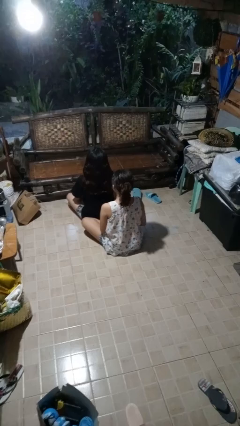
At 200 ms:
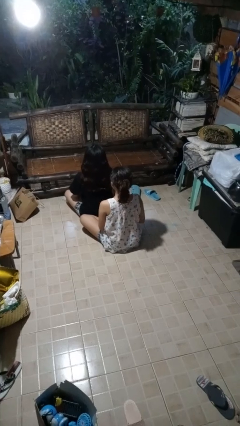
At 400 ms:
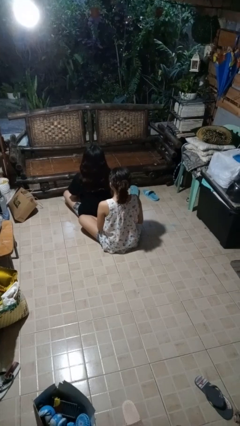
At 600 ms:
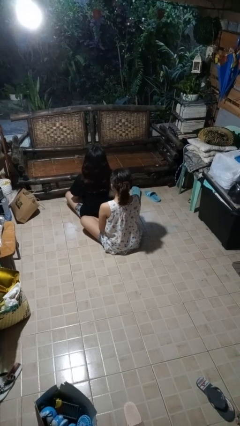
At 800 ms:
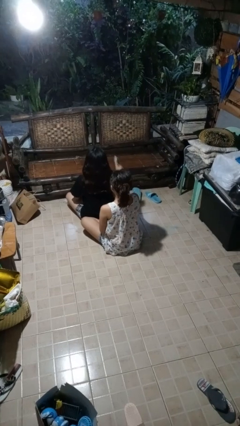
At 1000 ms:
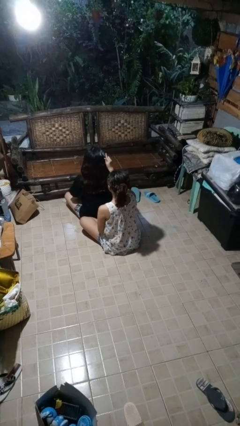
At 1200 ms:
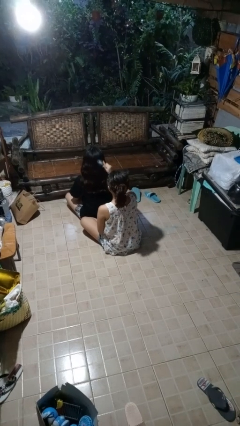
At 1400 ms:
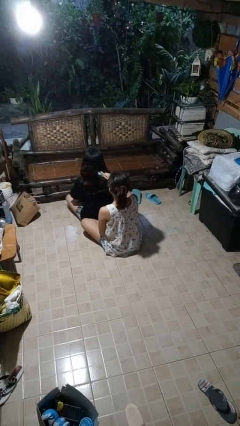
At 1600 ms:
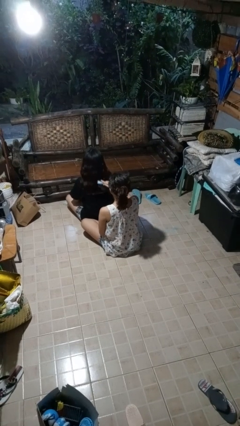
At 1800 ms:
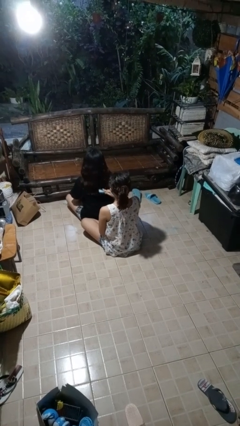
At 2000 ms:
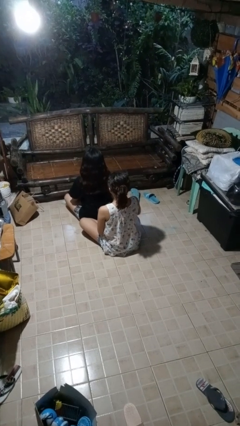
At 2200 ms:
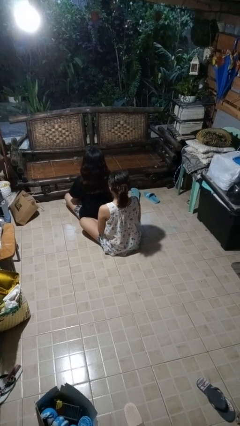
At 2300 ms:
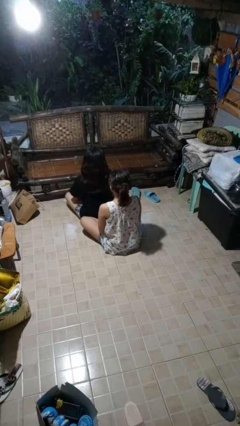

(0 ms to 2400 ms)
person brushes hair of person

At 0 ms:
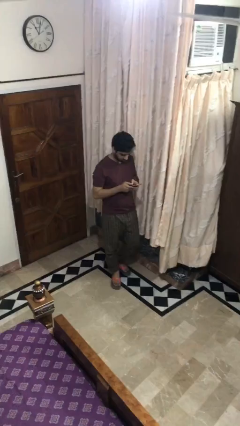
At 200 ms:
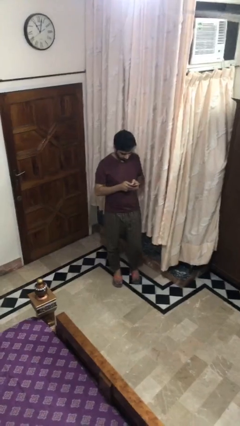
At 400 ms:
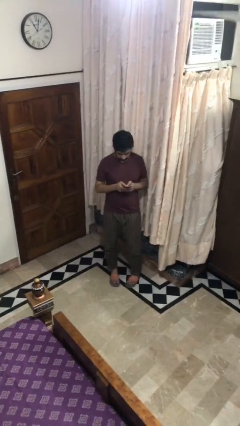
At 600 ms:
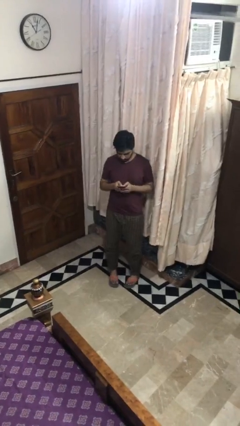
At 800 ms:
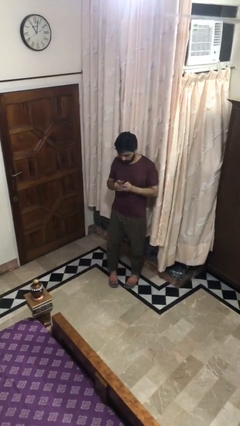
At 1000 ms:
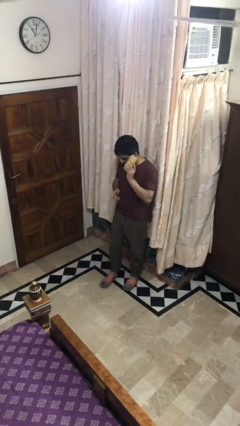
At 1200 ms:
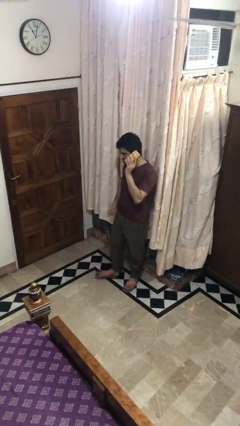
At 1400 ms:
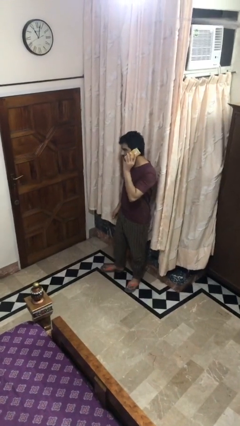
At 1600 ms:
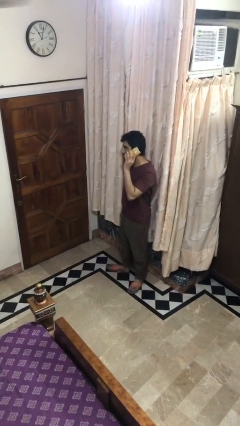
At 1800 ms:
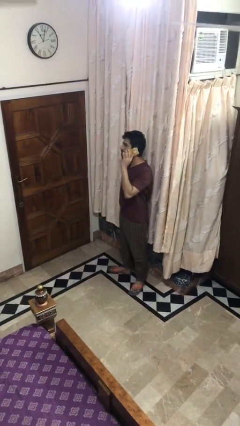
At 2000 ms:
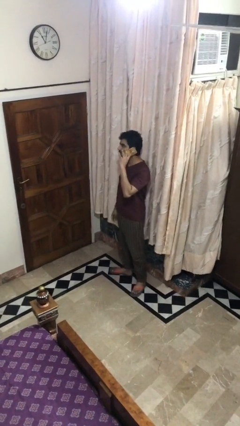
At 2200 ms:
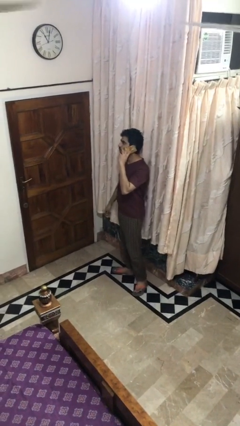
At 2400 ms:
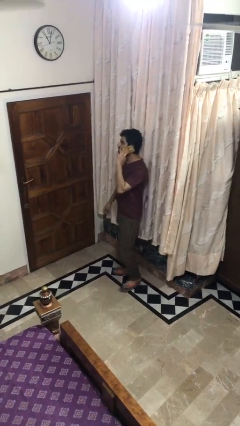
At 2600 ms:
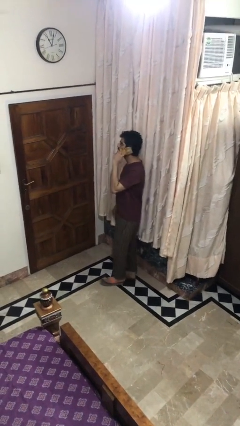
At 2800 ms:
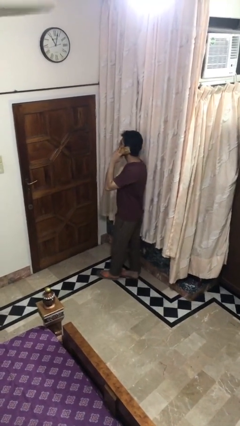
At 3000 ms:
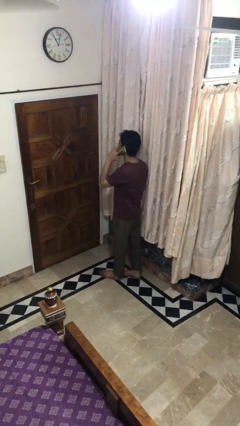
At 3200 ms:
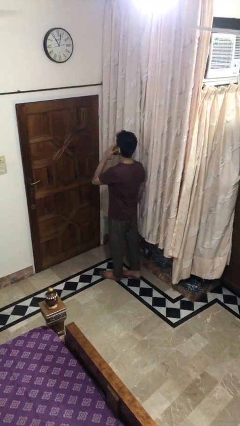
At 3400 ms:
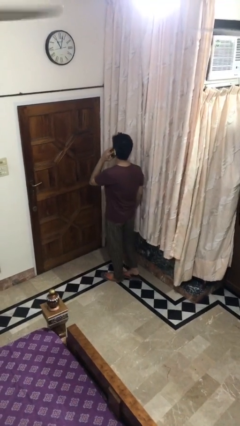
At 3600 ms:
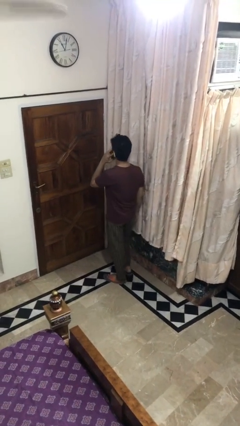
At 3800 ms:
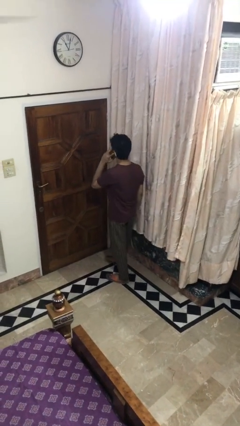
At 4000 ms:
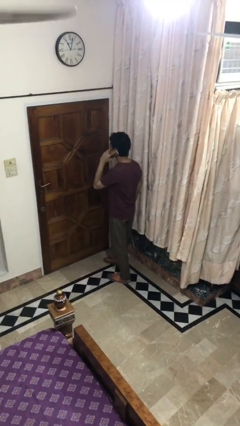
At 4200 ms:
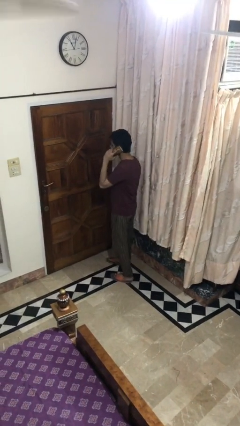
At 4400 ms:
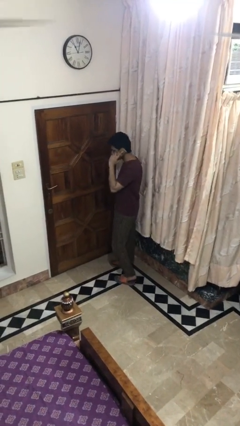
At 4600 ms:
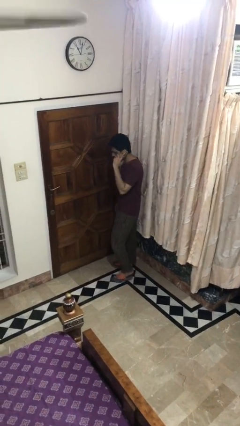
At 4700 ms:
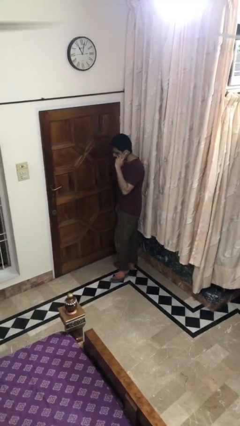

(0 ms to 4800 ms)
person talks on phone

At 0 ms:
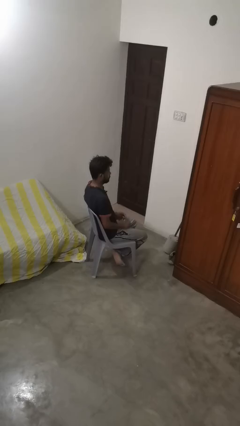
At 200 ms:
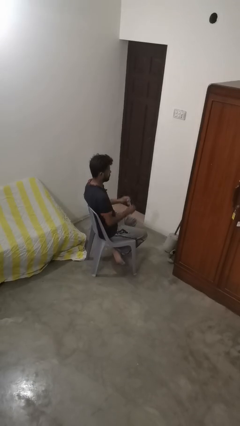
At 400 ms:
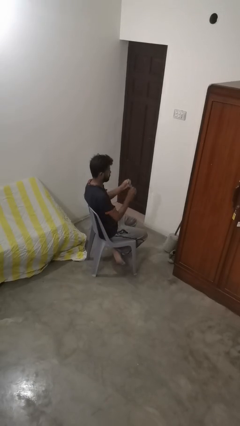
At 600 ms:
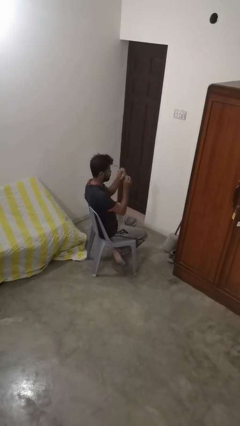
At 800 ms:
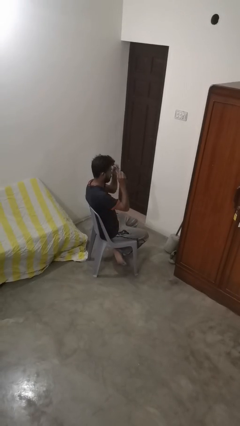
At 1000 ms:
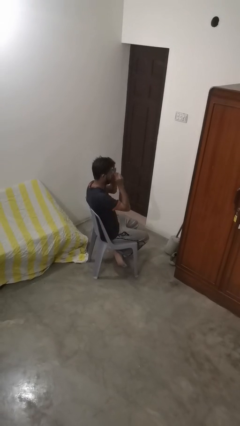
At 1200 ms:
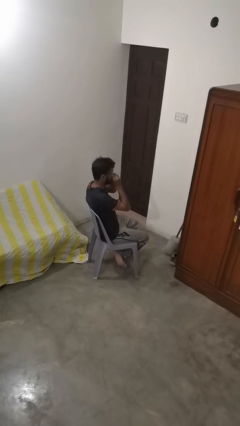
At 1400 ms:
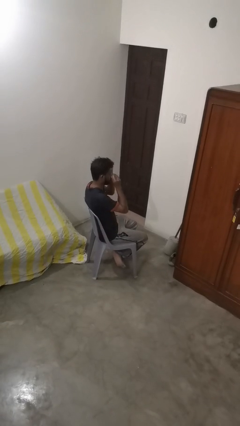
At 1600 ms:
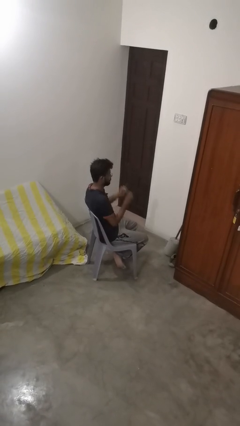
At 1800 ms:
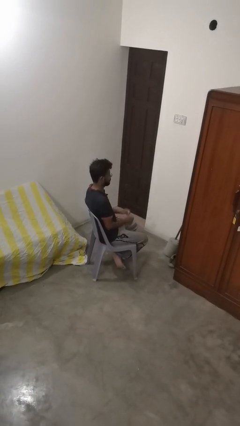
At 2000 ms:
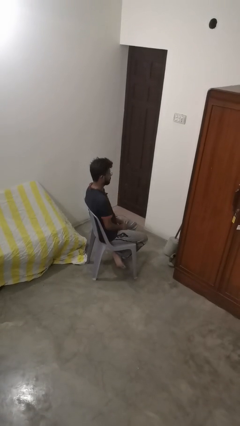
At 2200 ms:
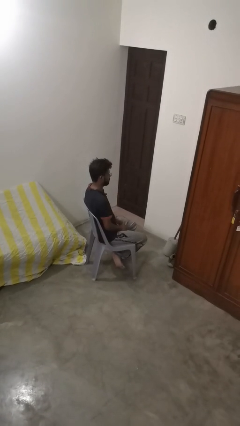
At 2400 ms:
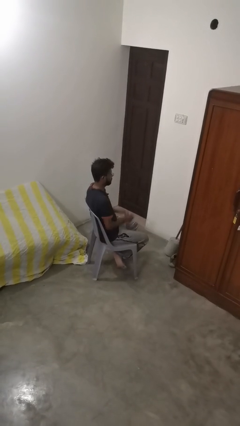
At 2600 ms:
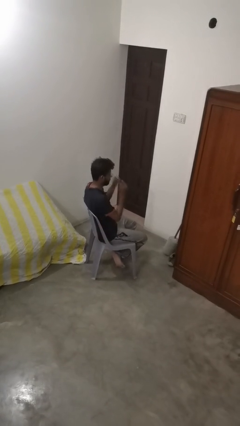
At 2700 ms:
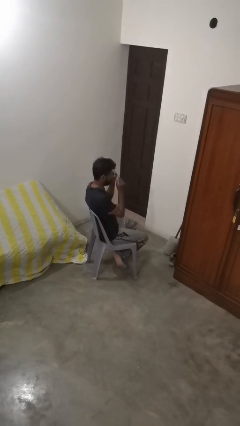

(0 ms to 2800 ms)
person puts on glasses

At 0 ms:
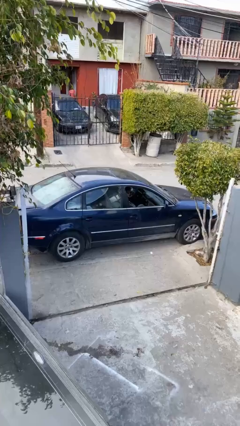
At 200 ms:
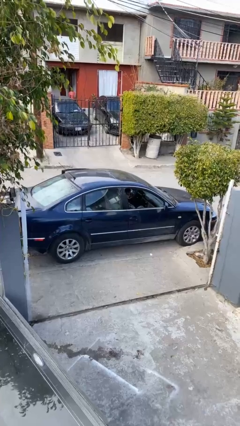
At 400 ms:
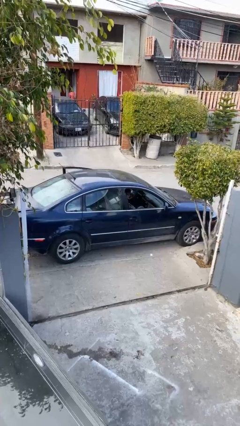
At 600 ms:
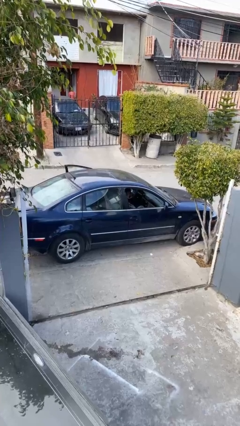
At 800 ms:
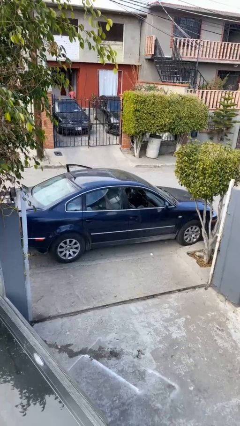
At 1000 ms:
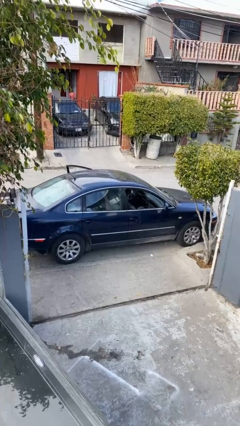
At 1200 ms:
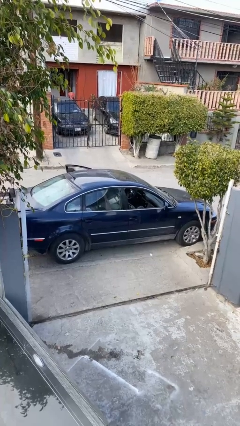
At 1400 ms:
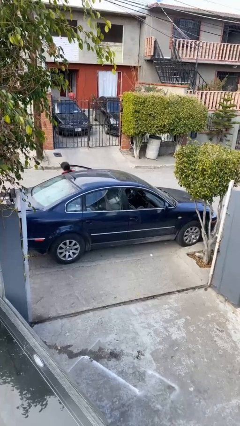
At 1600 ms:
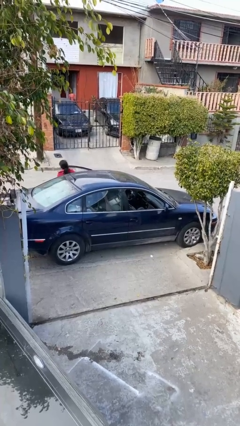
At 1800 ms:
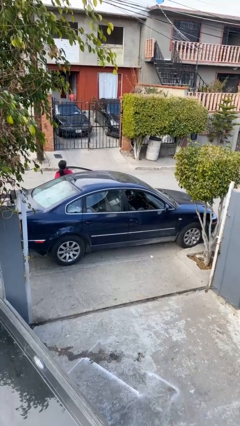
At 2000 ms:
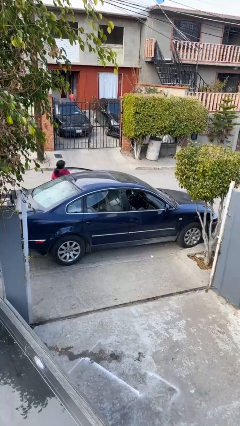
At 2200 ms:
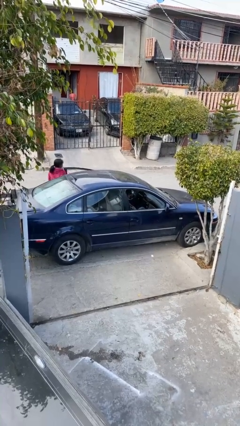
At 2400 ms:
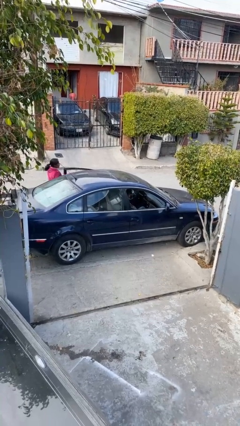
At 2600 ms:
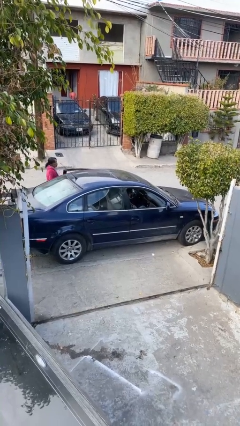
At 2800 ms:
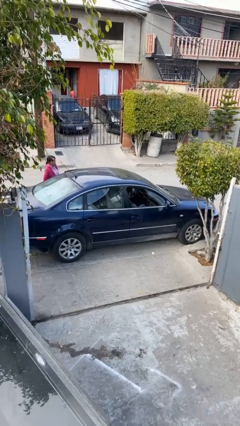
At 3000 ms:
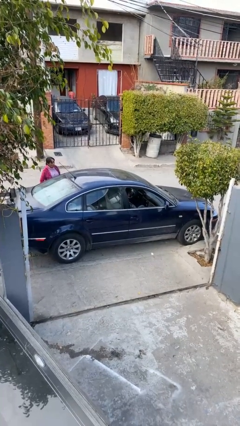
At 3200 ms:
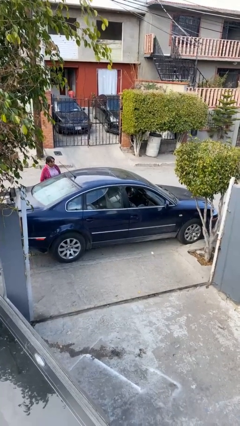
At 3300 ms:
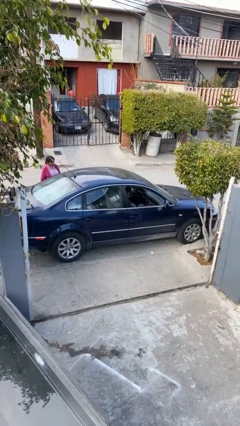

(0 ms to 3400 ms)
car drops off person

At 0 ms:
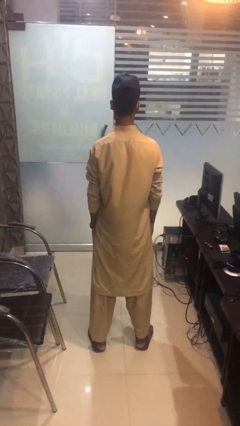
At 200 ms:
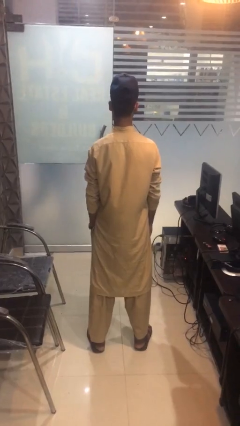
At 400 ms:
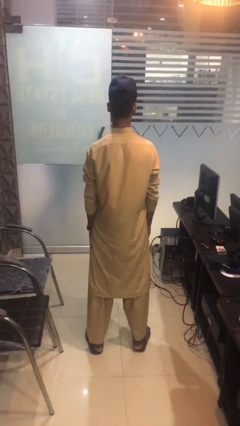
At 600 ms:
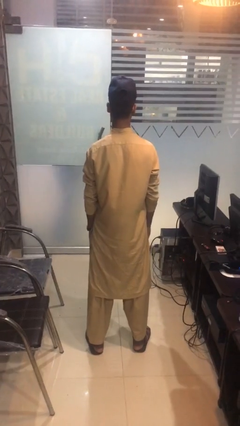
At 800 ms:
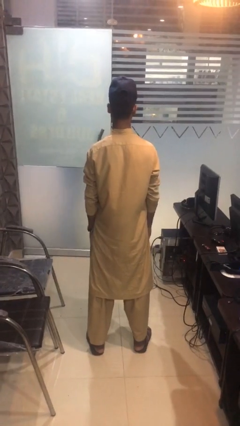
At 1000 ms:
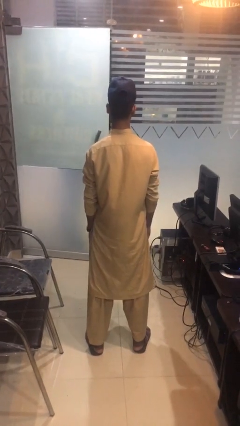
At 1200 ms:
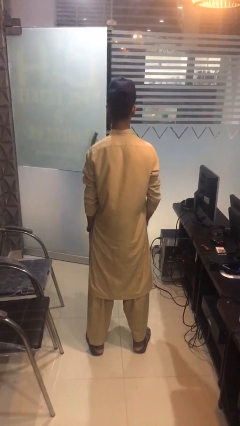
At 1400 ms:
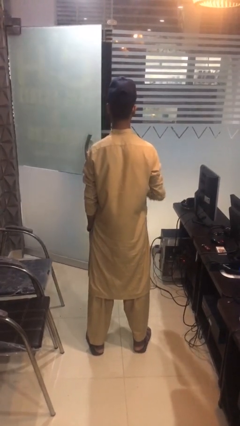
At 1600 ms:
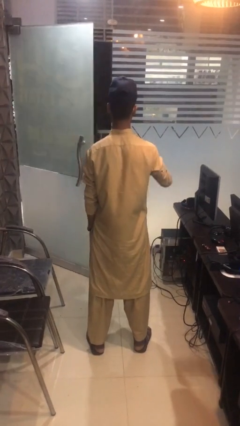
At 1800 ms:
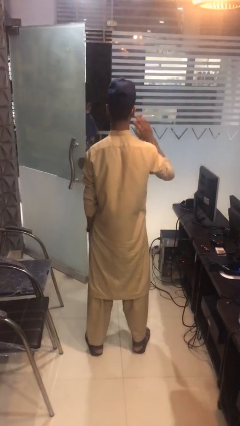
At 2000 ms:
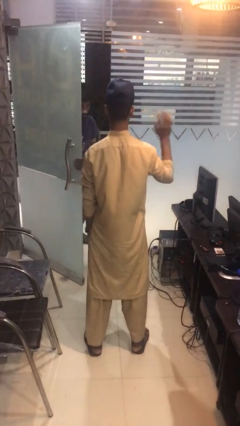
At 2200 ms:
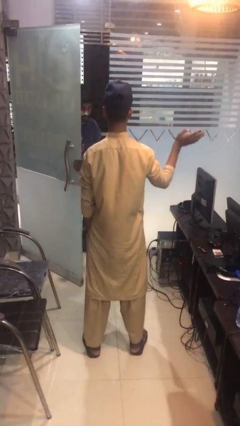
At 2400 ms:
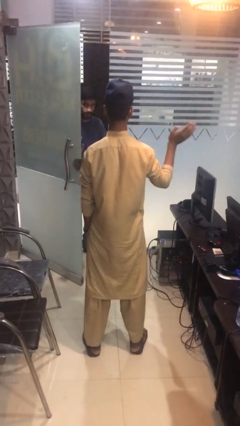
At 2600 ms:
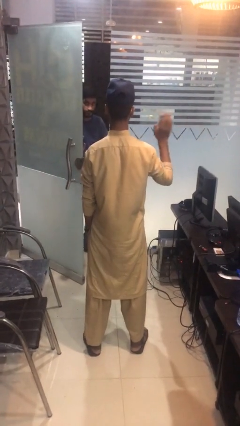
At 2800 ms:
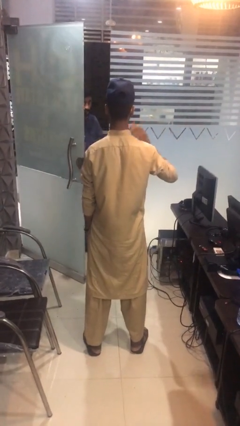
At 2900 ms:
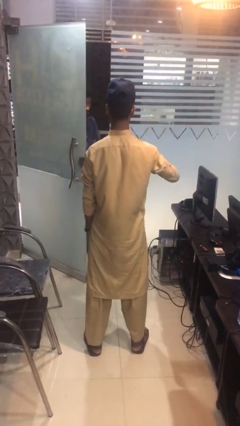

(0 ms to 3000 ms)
person gestures swipe right

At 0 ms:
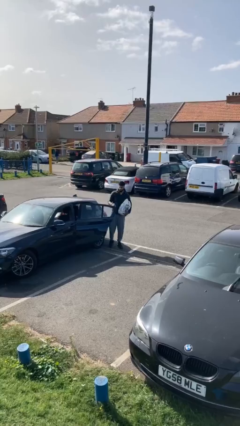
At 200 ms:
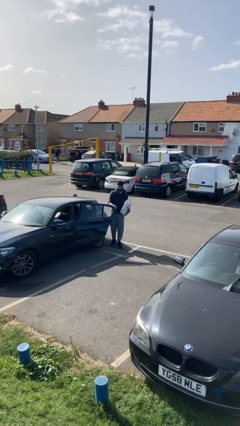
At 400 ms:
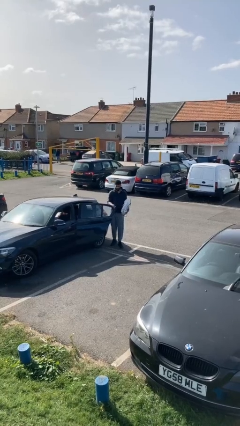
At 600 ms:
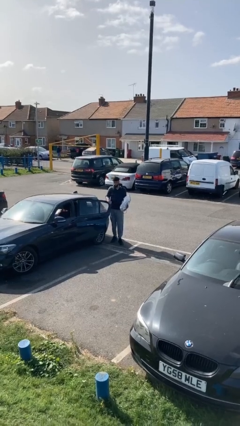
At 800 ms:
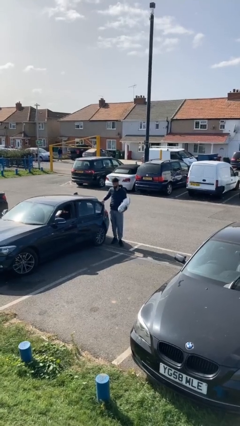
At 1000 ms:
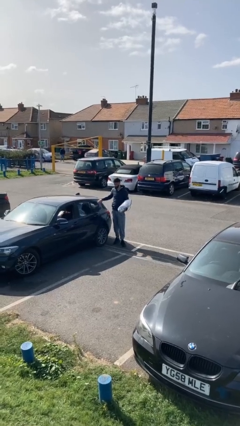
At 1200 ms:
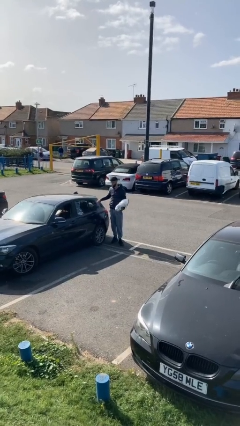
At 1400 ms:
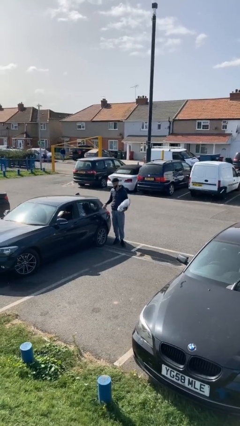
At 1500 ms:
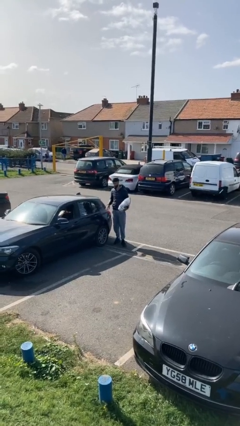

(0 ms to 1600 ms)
person closes car door
